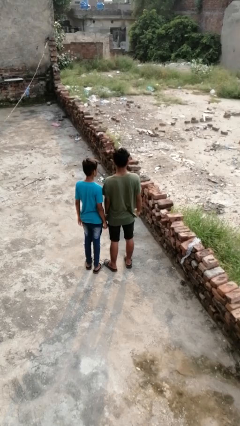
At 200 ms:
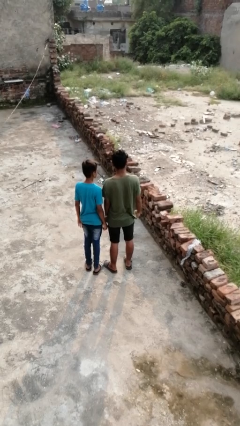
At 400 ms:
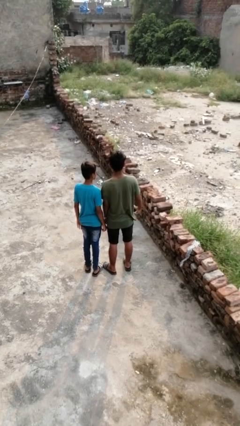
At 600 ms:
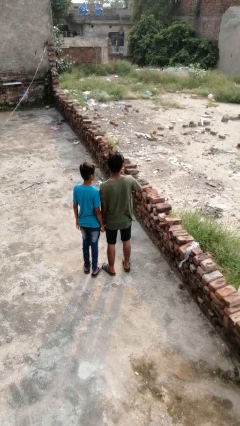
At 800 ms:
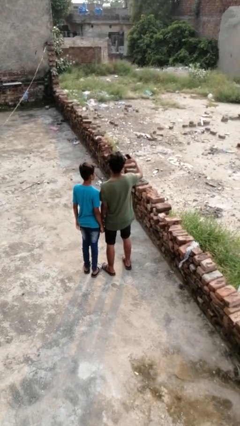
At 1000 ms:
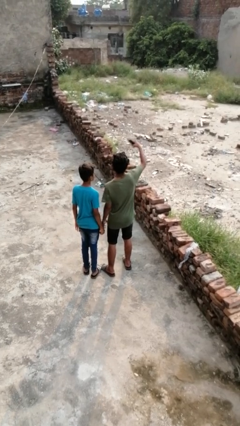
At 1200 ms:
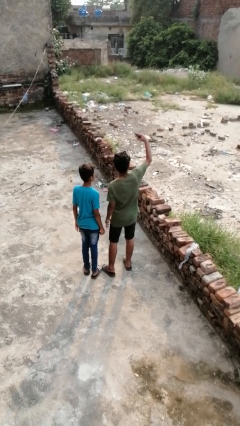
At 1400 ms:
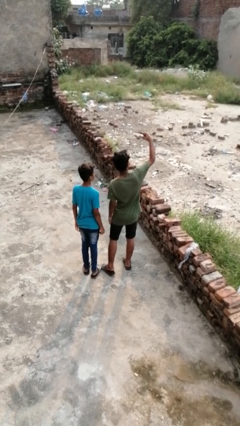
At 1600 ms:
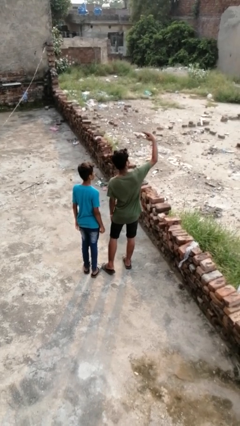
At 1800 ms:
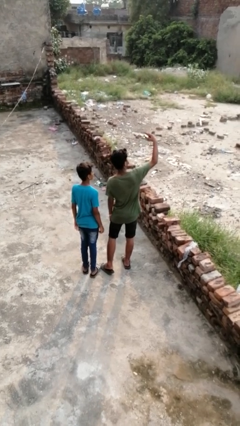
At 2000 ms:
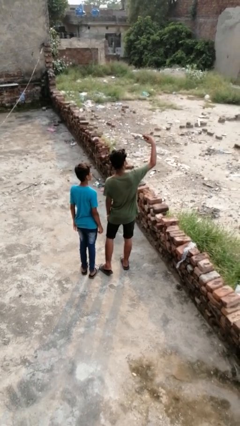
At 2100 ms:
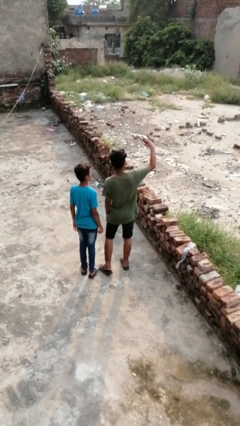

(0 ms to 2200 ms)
person takes selfie with person

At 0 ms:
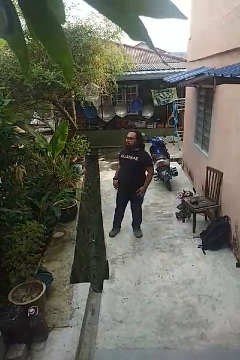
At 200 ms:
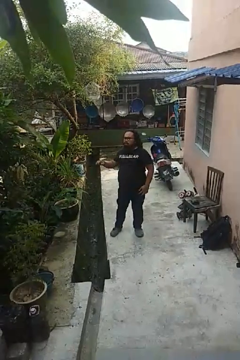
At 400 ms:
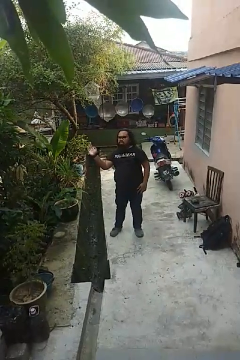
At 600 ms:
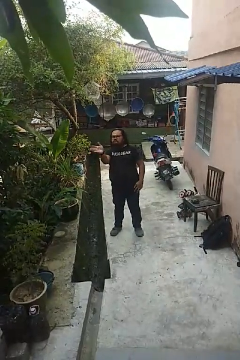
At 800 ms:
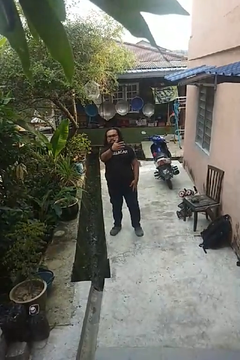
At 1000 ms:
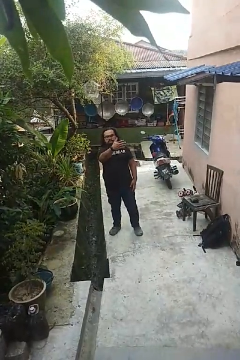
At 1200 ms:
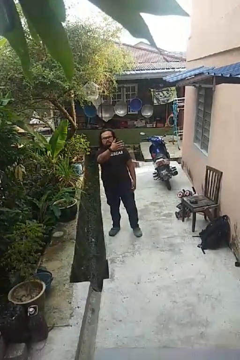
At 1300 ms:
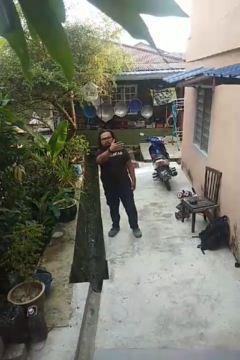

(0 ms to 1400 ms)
person gestures swipe left

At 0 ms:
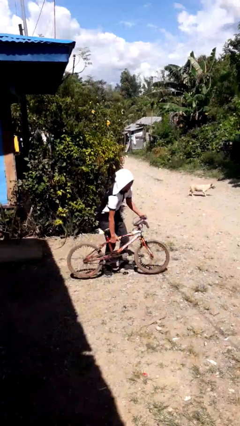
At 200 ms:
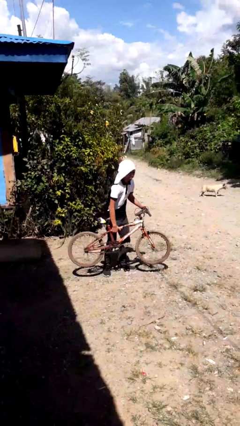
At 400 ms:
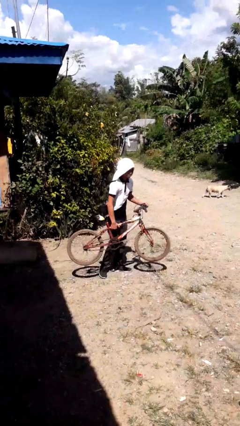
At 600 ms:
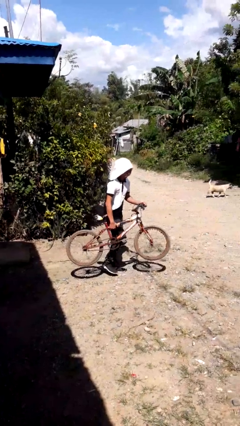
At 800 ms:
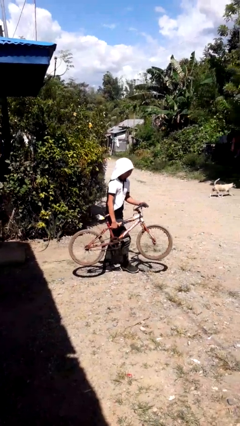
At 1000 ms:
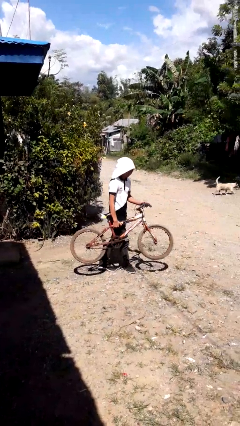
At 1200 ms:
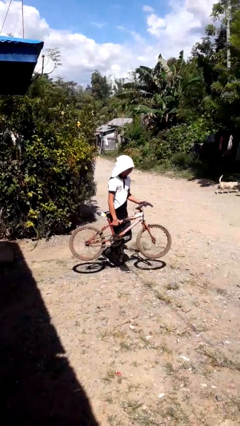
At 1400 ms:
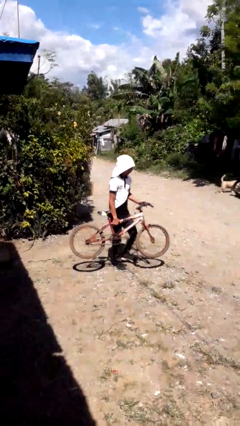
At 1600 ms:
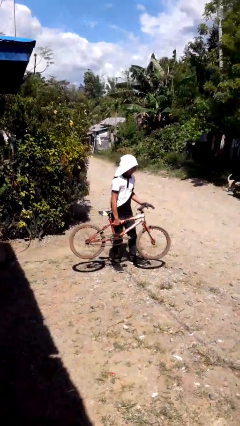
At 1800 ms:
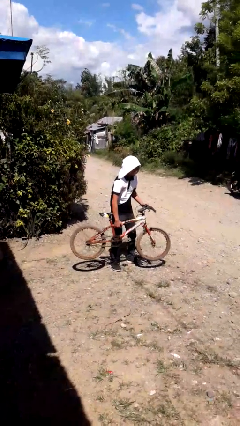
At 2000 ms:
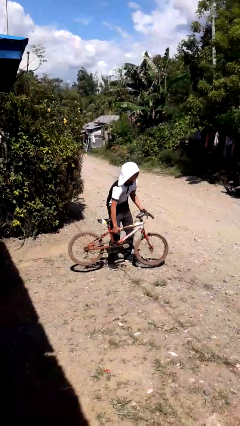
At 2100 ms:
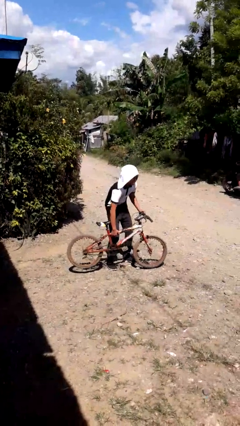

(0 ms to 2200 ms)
person carries bicycle

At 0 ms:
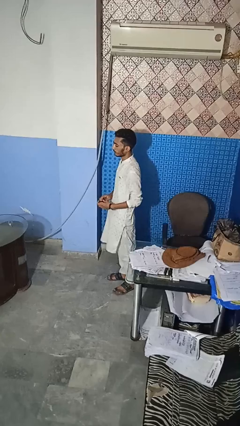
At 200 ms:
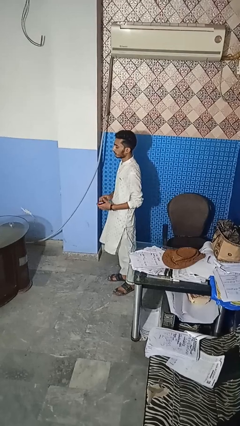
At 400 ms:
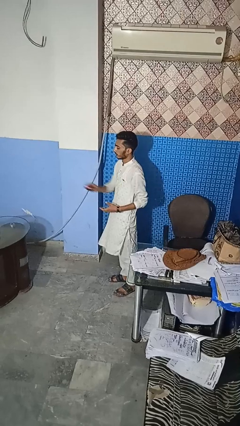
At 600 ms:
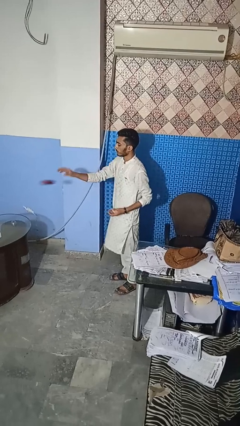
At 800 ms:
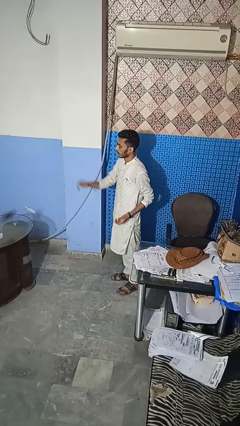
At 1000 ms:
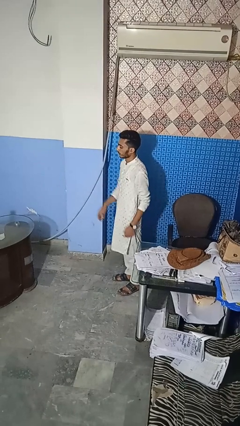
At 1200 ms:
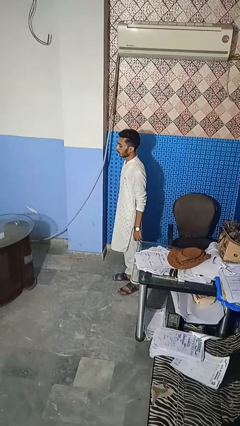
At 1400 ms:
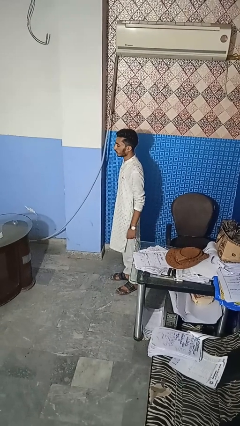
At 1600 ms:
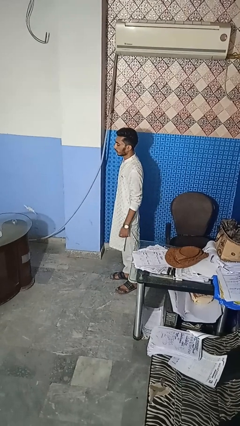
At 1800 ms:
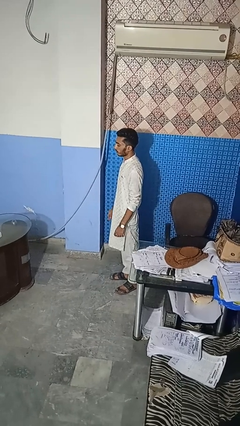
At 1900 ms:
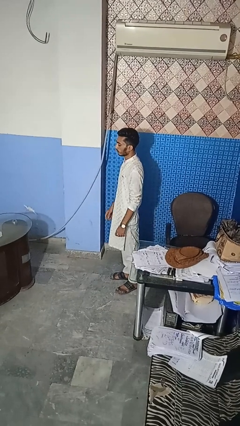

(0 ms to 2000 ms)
person throws object on table

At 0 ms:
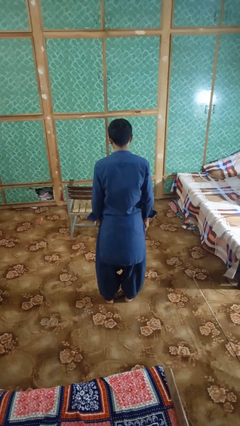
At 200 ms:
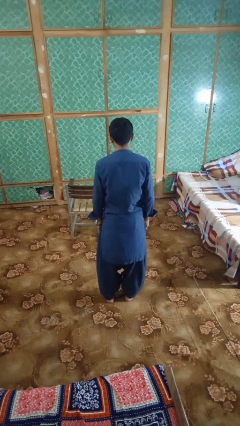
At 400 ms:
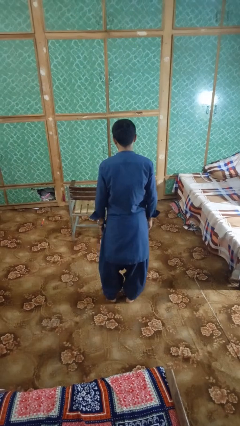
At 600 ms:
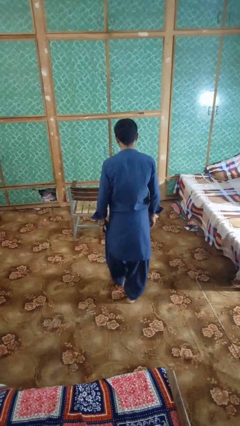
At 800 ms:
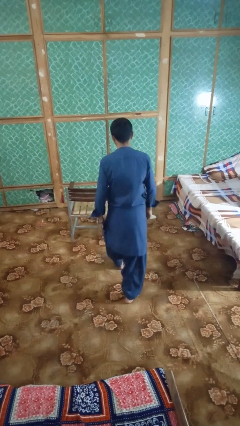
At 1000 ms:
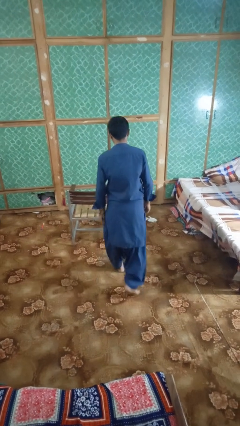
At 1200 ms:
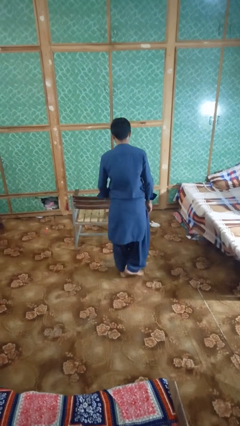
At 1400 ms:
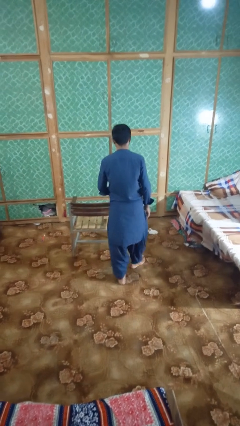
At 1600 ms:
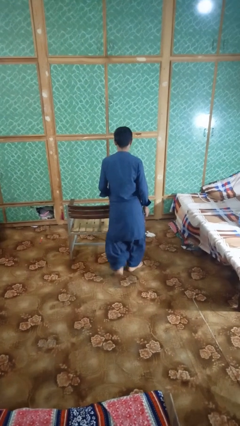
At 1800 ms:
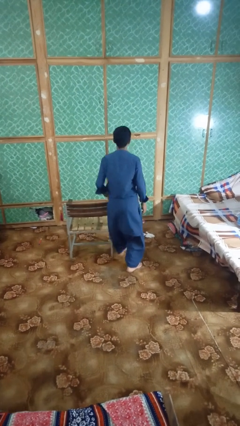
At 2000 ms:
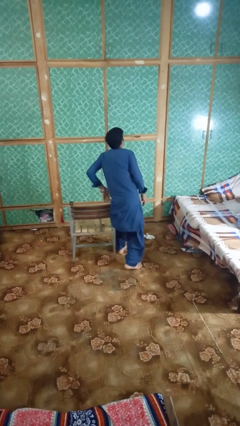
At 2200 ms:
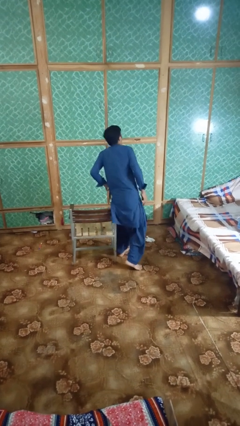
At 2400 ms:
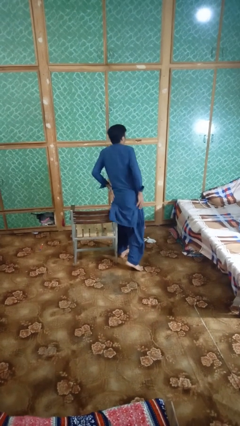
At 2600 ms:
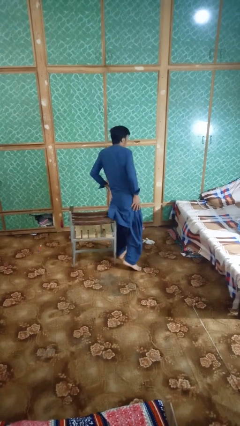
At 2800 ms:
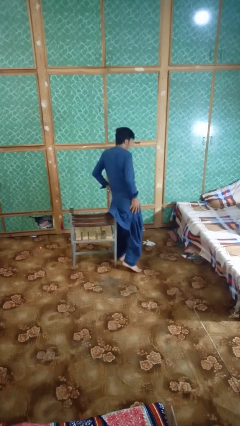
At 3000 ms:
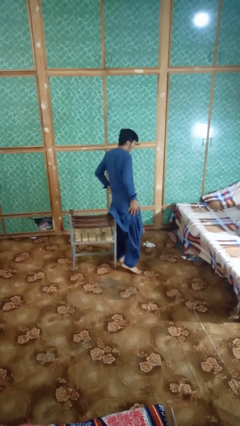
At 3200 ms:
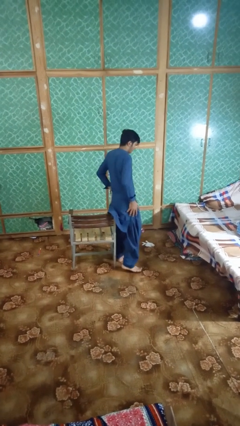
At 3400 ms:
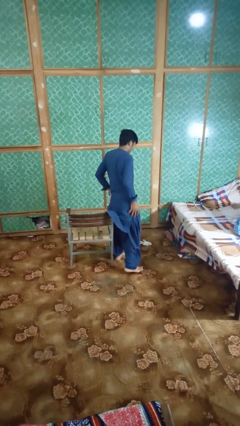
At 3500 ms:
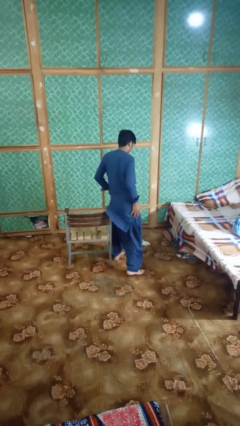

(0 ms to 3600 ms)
person bumps into table

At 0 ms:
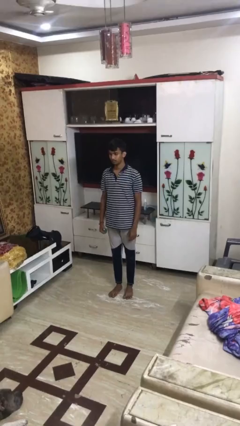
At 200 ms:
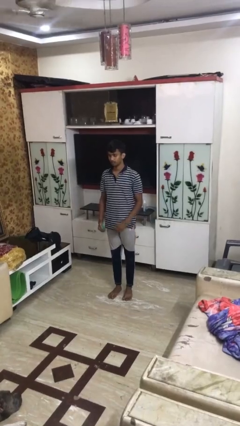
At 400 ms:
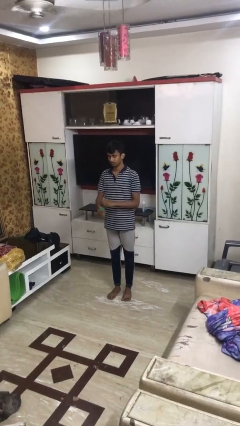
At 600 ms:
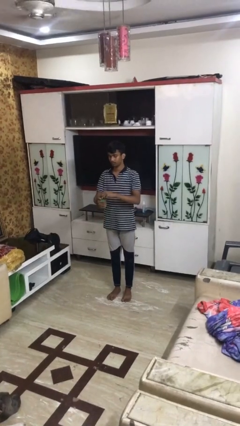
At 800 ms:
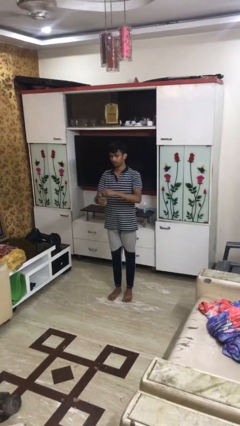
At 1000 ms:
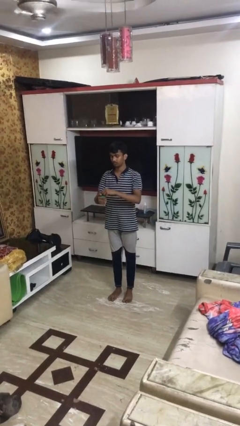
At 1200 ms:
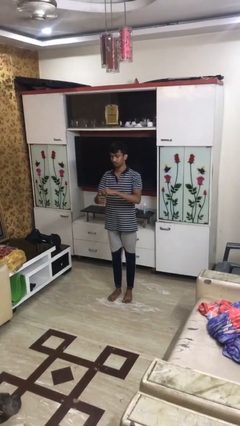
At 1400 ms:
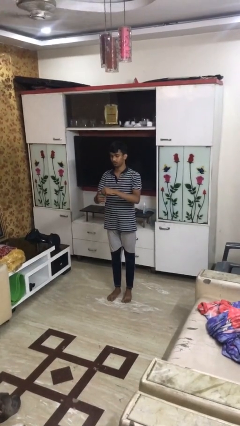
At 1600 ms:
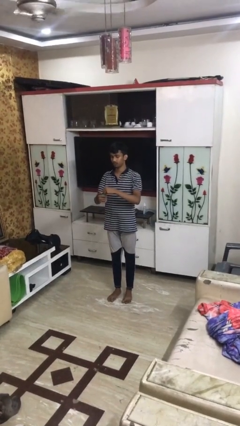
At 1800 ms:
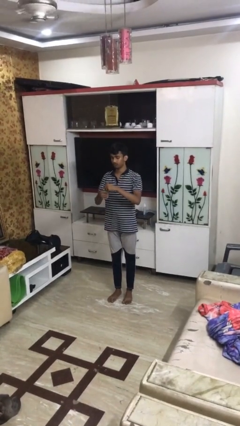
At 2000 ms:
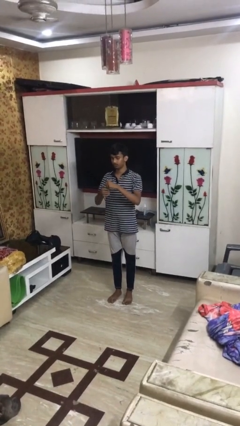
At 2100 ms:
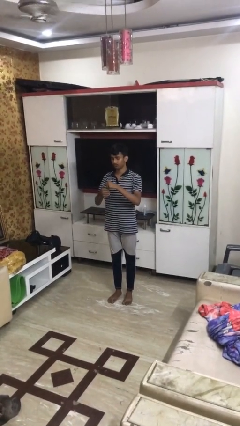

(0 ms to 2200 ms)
person opens beverage can

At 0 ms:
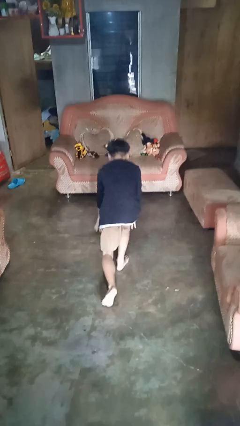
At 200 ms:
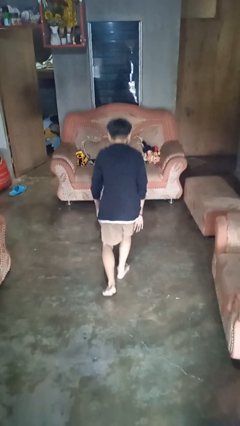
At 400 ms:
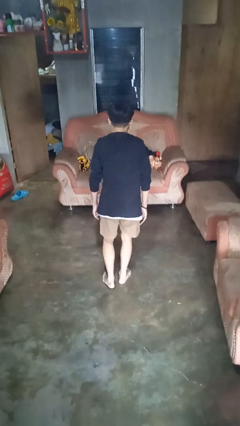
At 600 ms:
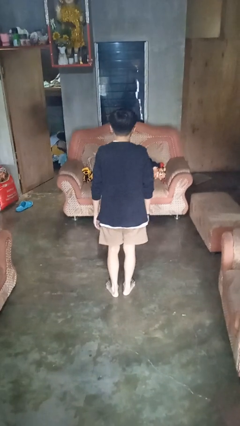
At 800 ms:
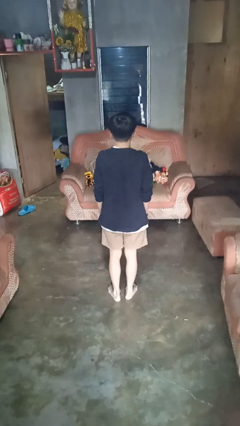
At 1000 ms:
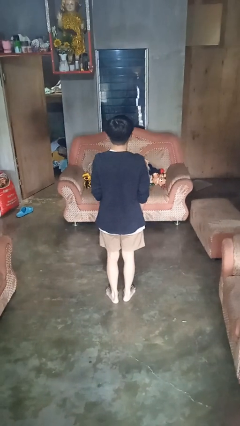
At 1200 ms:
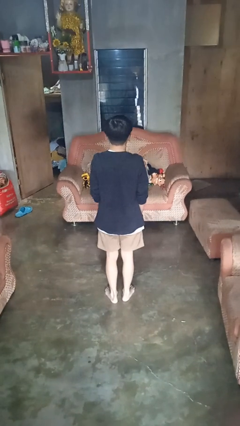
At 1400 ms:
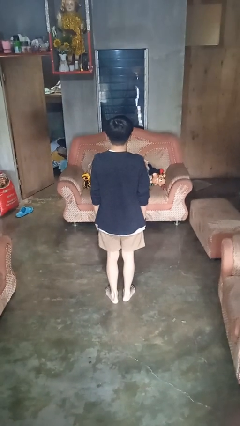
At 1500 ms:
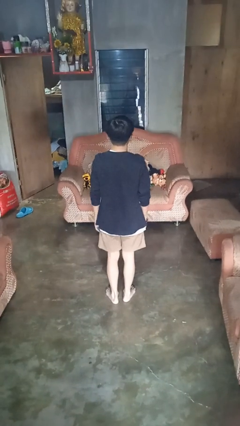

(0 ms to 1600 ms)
person stands up from floor

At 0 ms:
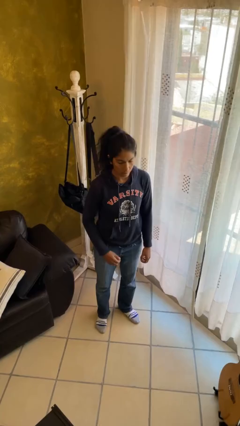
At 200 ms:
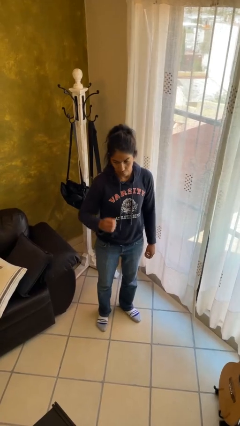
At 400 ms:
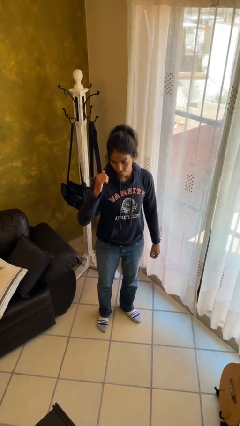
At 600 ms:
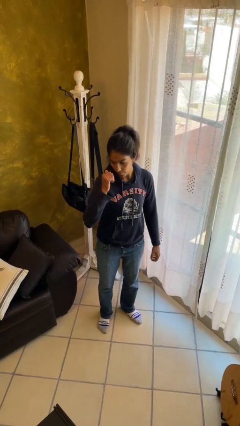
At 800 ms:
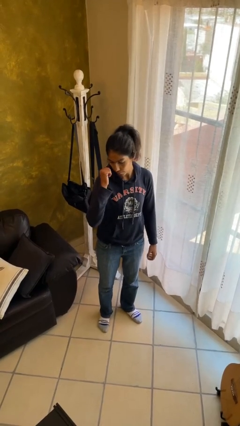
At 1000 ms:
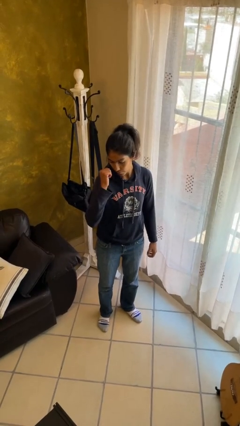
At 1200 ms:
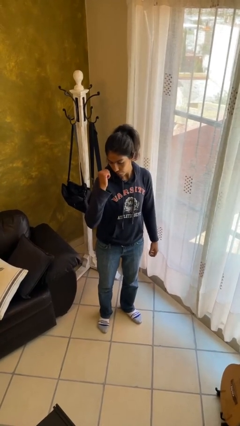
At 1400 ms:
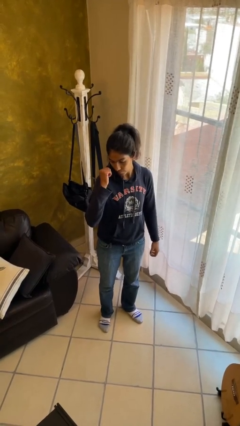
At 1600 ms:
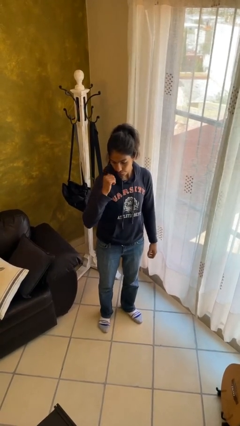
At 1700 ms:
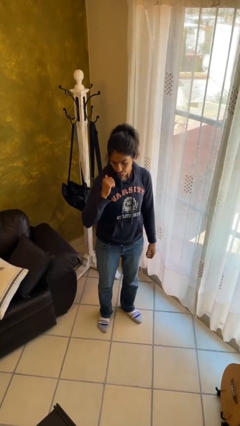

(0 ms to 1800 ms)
person gestures behind me
